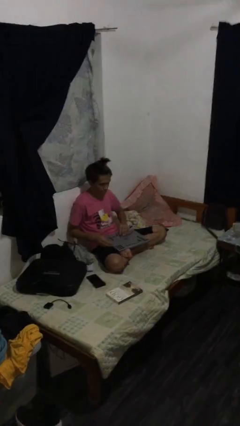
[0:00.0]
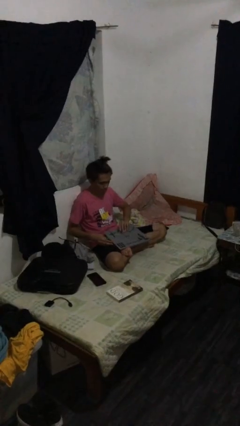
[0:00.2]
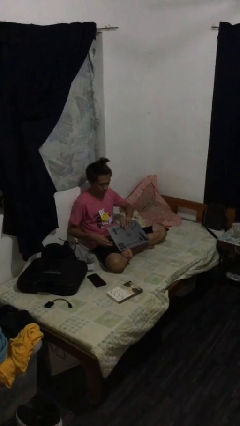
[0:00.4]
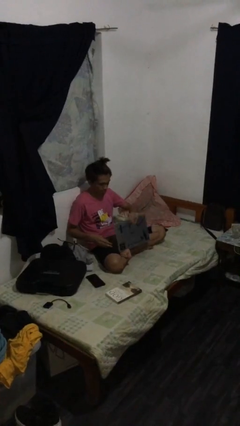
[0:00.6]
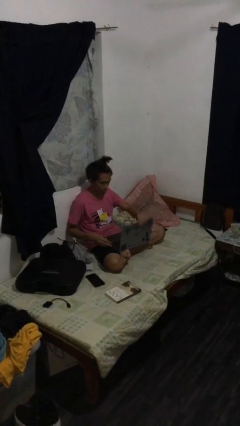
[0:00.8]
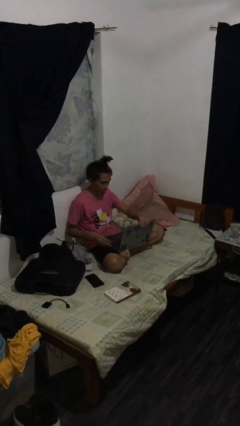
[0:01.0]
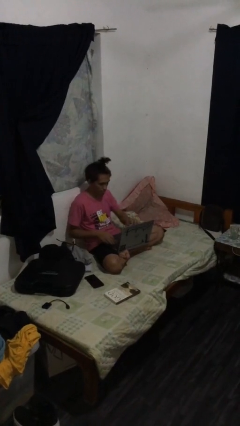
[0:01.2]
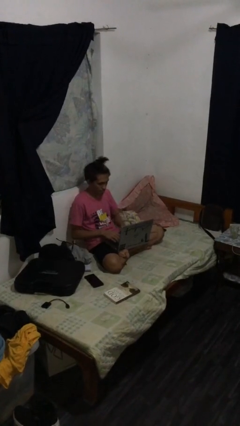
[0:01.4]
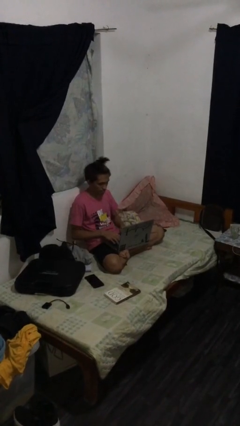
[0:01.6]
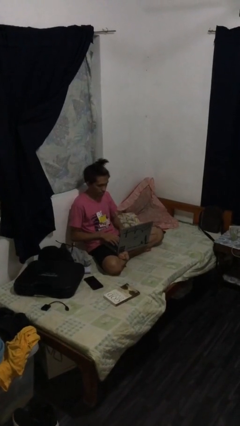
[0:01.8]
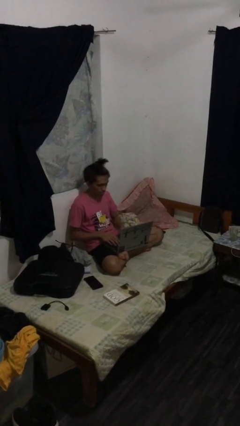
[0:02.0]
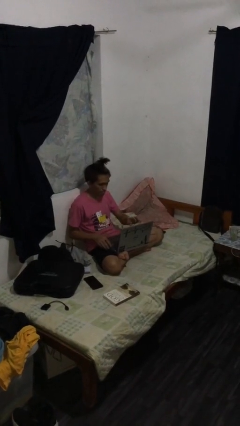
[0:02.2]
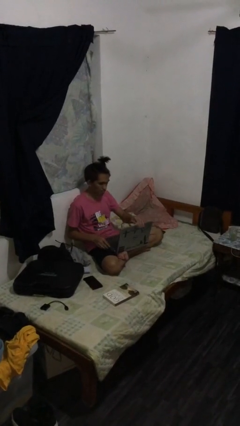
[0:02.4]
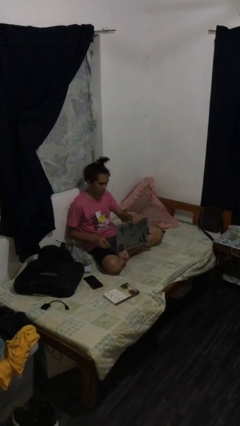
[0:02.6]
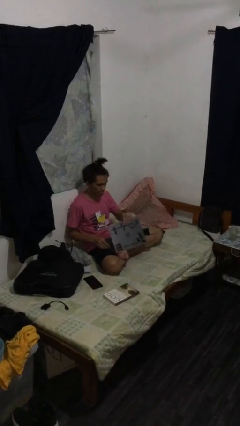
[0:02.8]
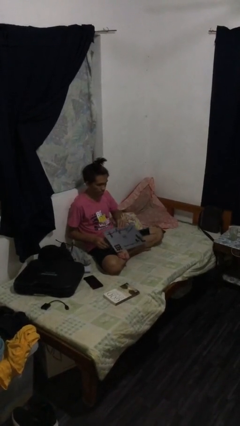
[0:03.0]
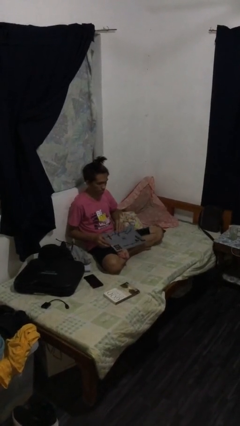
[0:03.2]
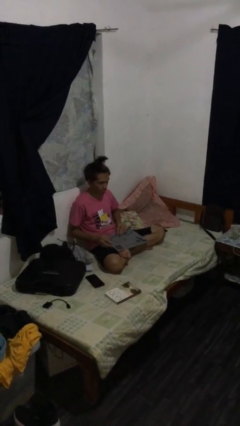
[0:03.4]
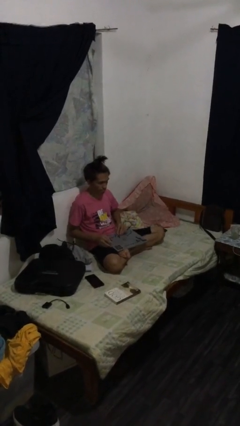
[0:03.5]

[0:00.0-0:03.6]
person interacts with laptop

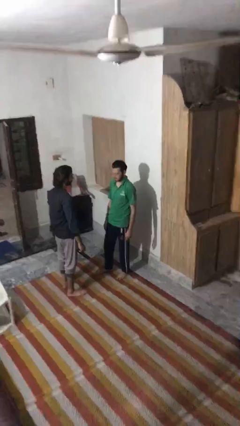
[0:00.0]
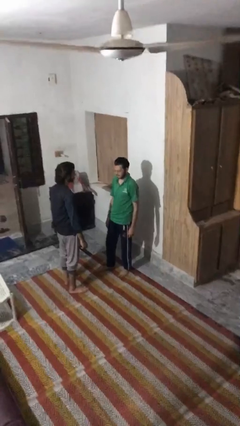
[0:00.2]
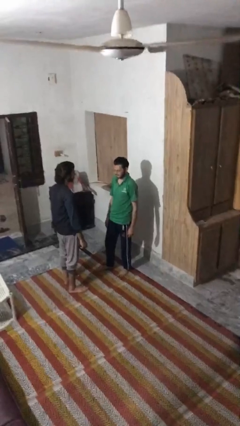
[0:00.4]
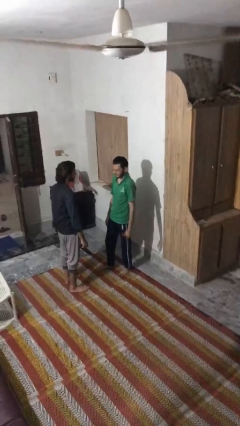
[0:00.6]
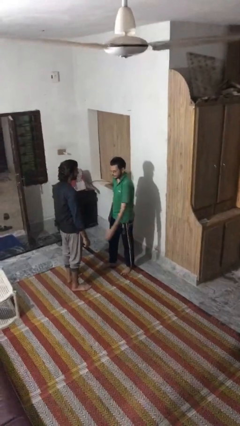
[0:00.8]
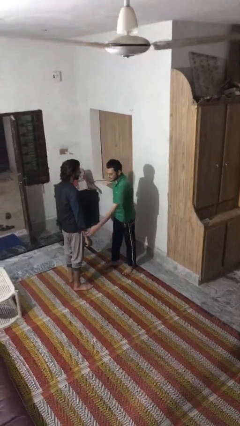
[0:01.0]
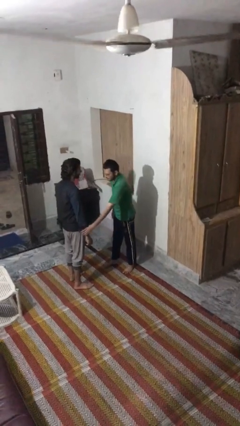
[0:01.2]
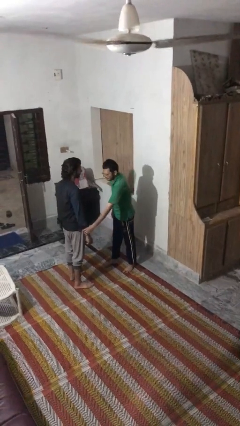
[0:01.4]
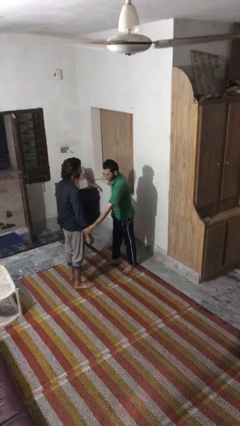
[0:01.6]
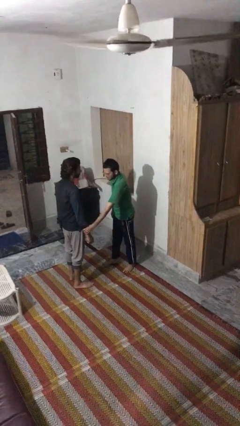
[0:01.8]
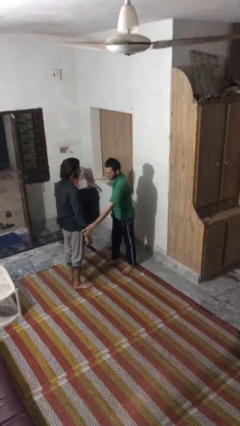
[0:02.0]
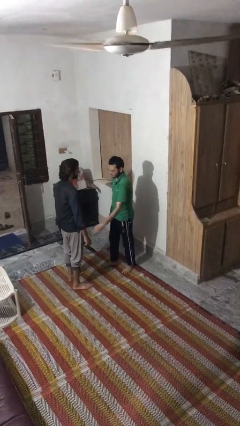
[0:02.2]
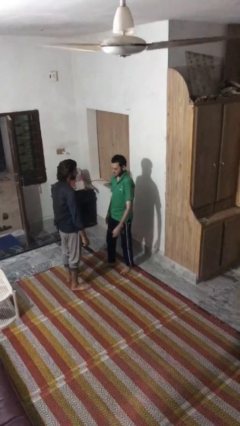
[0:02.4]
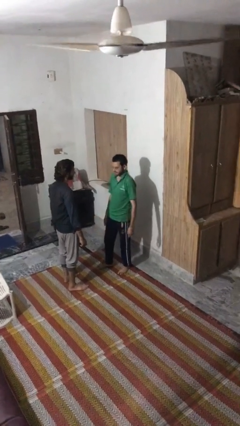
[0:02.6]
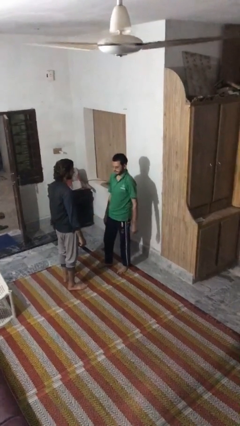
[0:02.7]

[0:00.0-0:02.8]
person grabs person by forearm

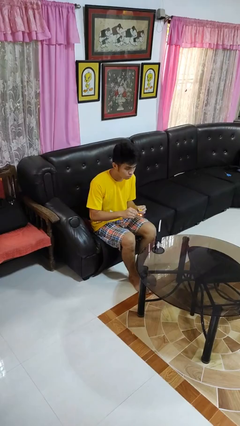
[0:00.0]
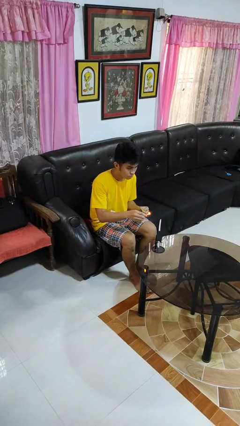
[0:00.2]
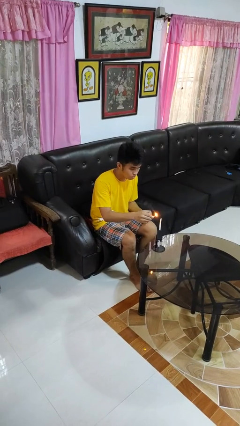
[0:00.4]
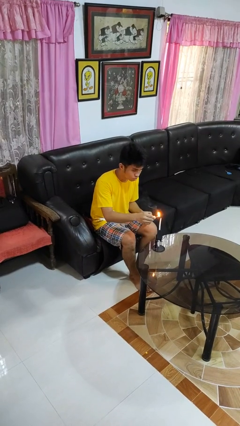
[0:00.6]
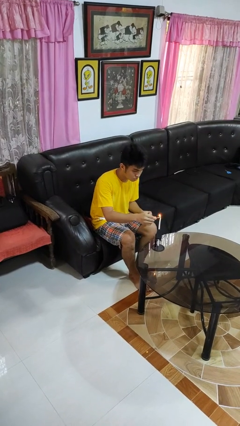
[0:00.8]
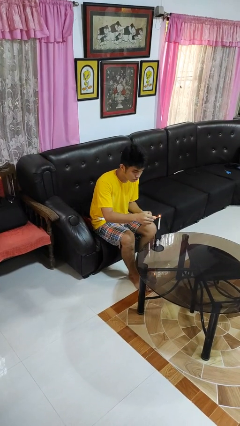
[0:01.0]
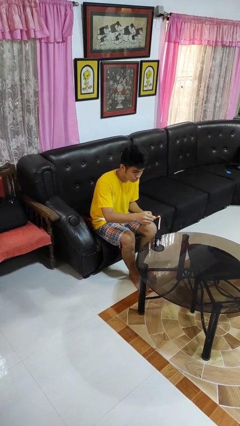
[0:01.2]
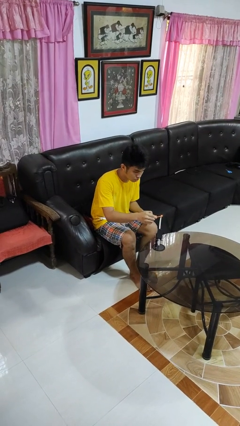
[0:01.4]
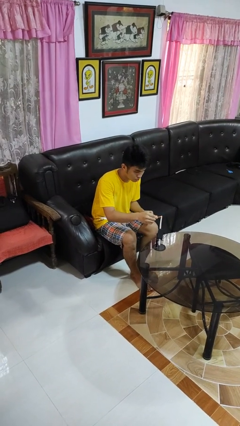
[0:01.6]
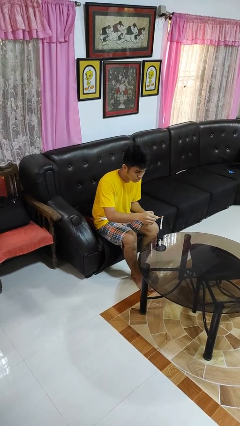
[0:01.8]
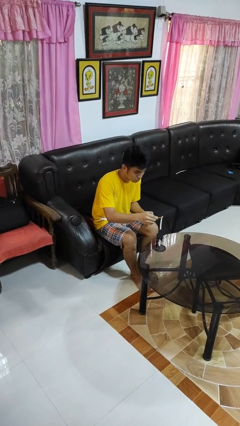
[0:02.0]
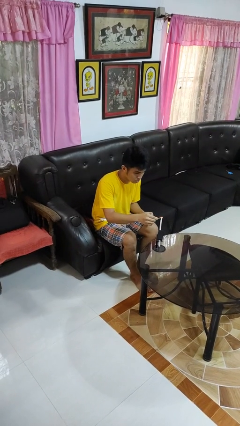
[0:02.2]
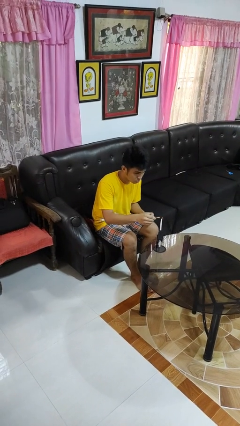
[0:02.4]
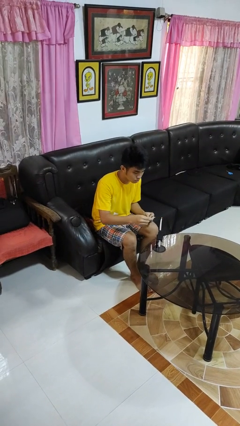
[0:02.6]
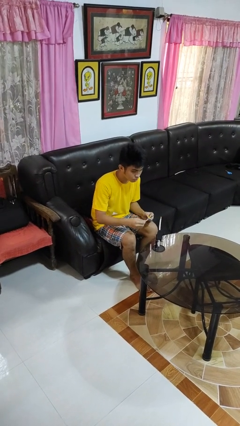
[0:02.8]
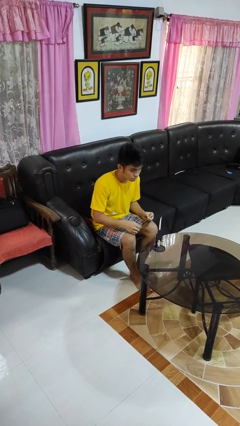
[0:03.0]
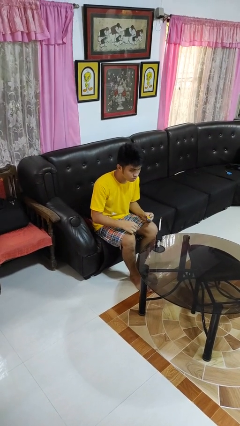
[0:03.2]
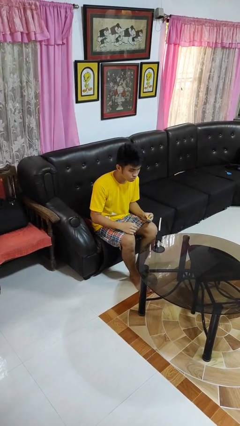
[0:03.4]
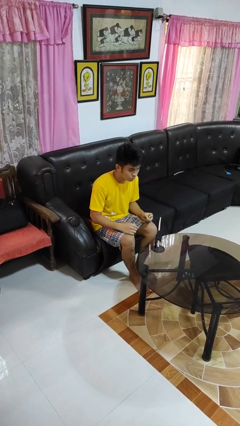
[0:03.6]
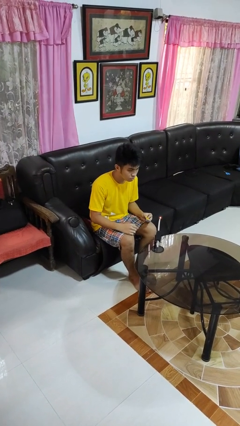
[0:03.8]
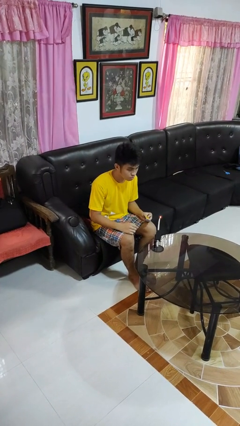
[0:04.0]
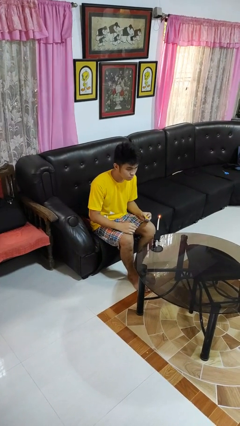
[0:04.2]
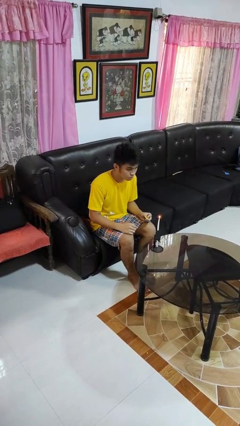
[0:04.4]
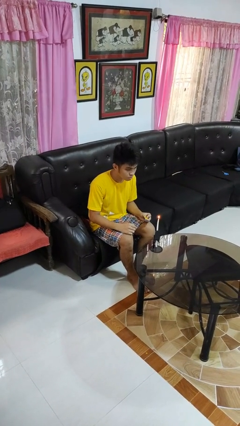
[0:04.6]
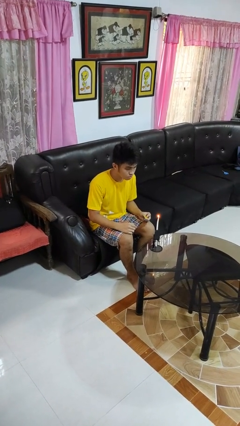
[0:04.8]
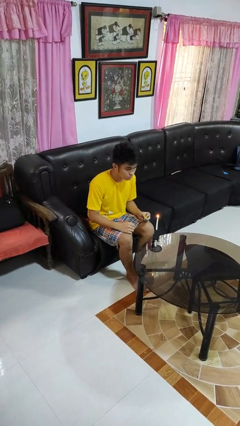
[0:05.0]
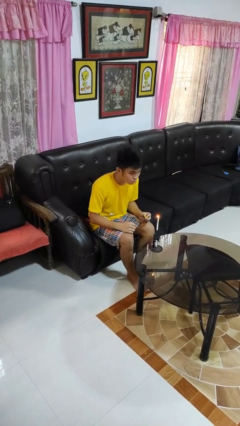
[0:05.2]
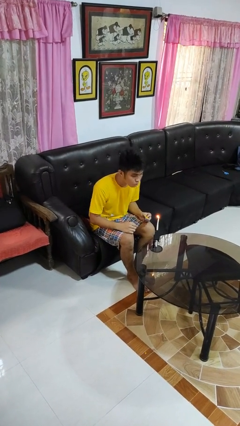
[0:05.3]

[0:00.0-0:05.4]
person lights candle

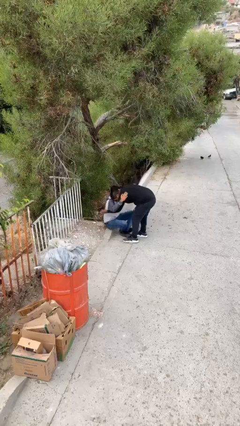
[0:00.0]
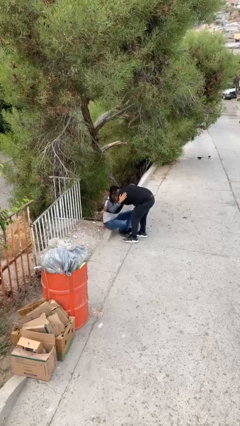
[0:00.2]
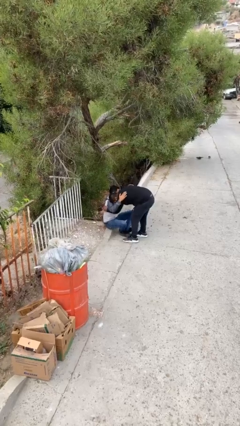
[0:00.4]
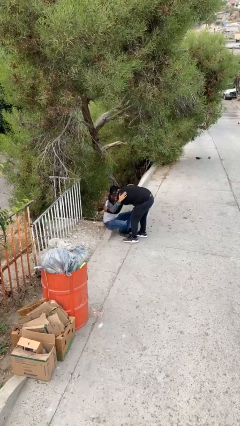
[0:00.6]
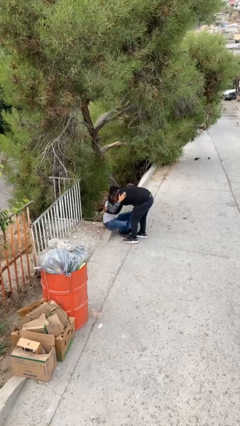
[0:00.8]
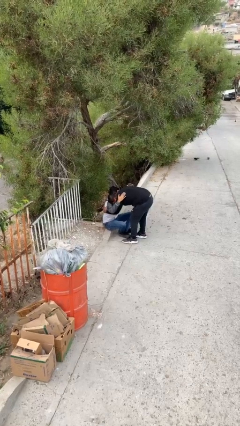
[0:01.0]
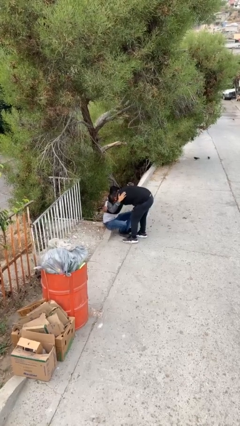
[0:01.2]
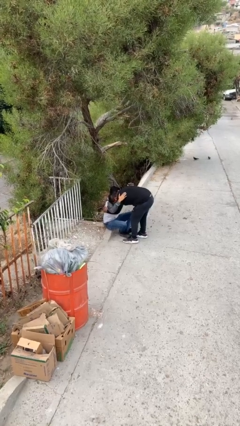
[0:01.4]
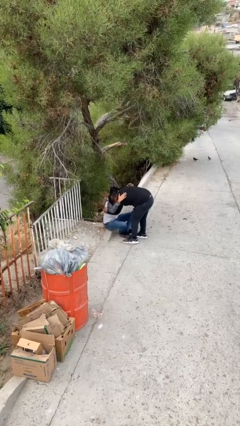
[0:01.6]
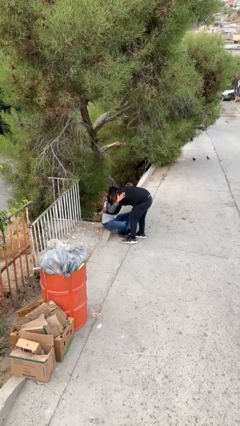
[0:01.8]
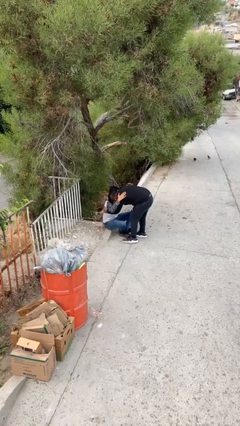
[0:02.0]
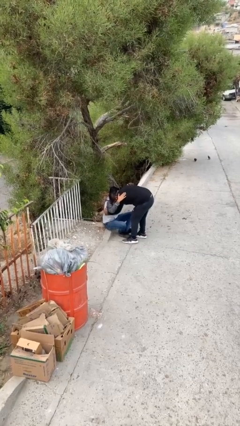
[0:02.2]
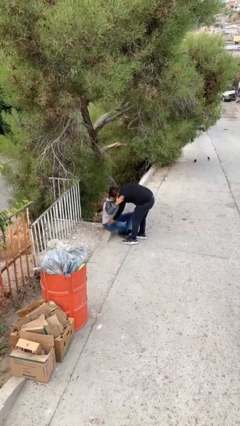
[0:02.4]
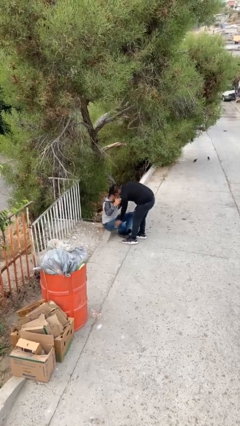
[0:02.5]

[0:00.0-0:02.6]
person embraces person

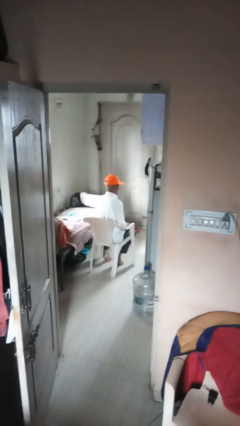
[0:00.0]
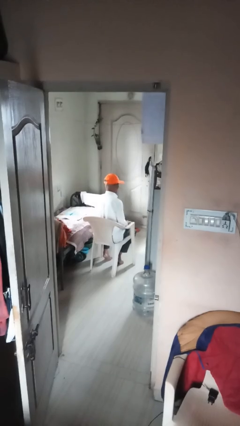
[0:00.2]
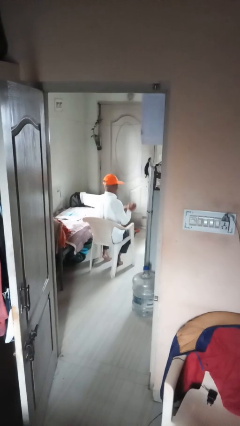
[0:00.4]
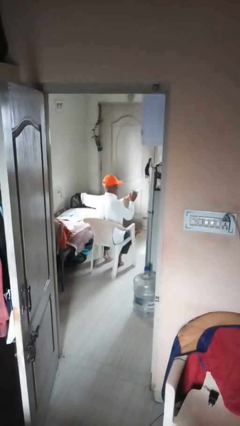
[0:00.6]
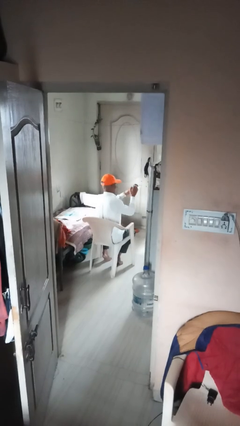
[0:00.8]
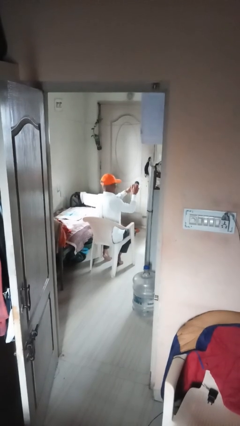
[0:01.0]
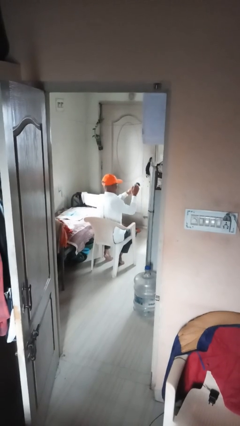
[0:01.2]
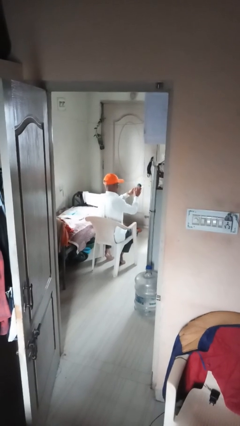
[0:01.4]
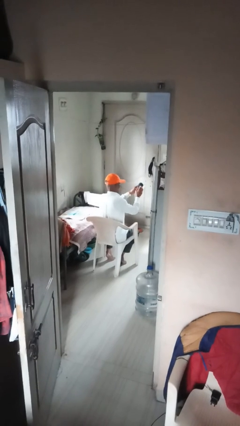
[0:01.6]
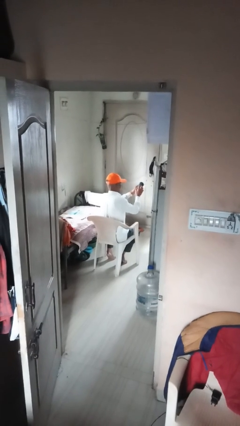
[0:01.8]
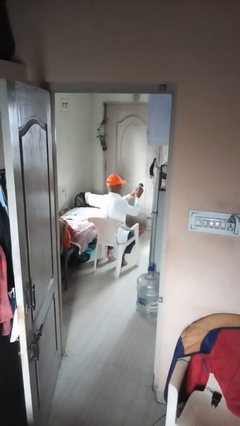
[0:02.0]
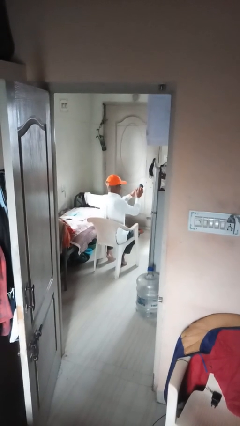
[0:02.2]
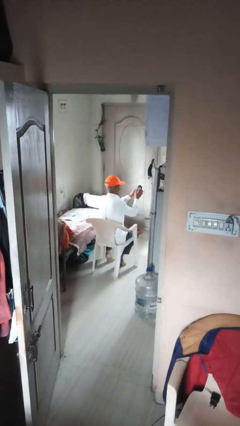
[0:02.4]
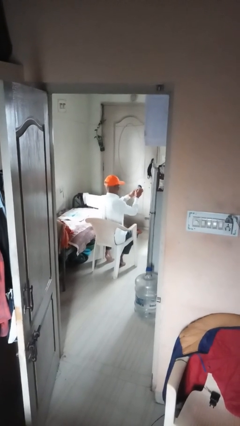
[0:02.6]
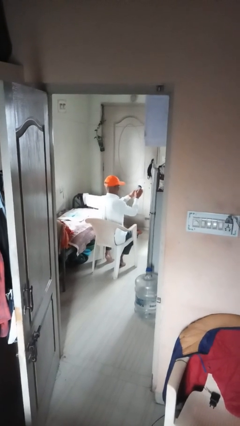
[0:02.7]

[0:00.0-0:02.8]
person taps object with finger
